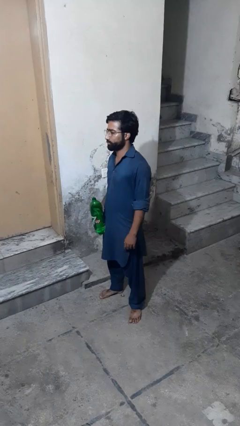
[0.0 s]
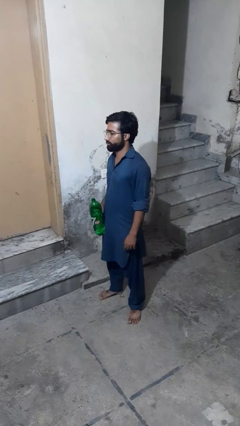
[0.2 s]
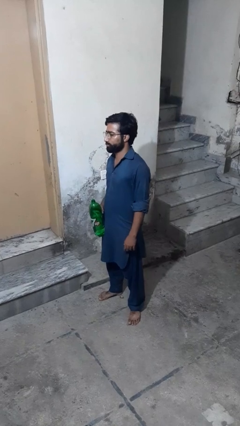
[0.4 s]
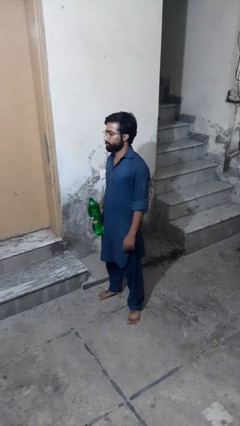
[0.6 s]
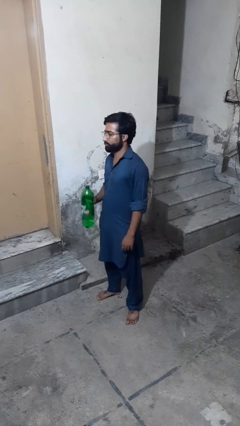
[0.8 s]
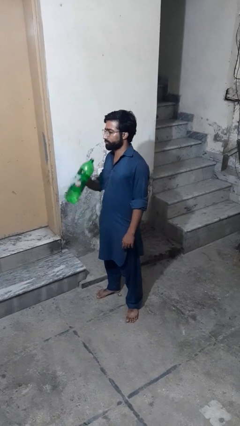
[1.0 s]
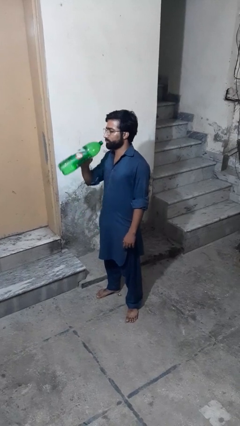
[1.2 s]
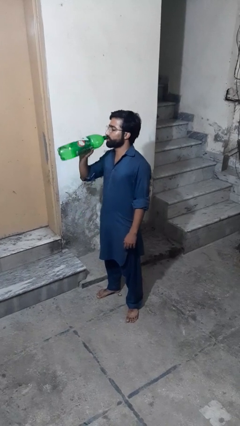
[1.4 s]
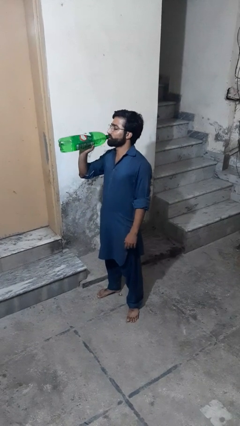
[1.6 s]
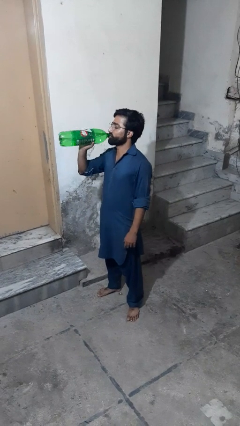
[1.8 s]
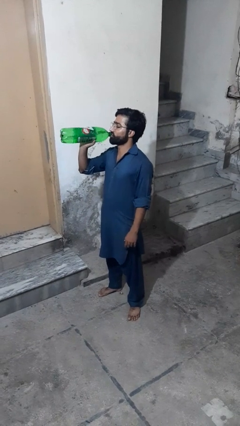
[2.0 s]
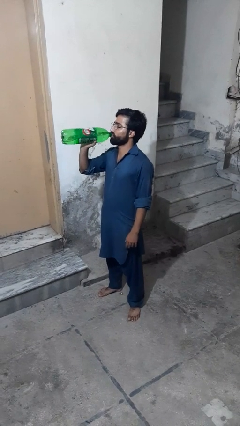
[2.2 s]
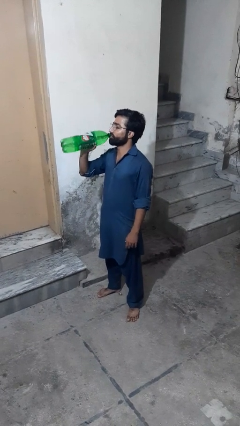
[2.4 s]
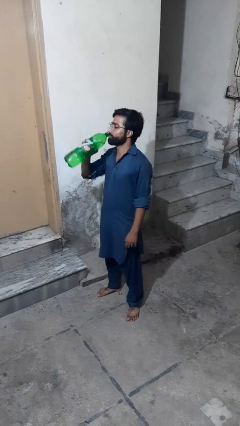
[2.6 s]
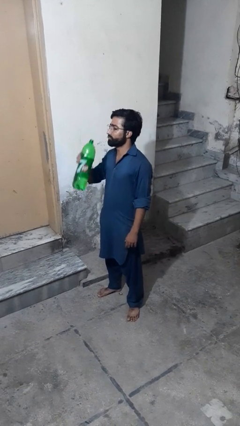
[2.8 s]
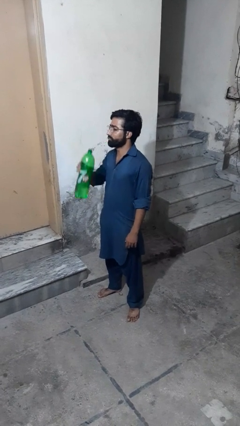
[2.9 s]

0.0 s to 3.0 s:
person drinks from bottle

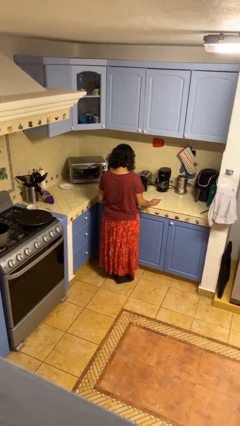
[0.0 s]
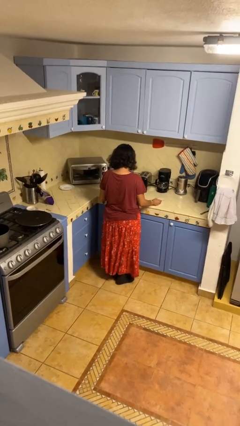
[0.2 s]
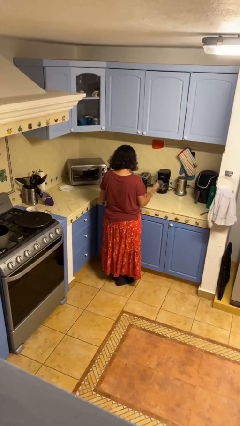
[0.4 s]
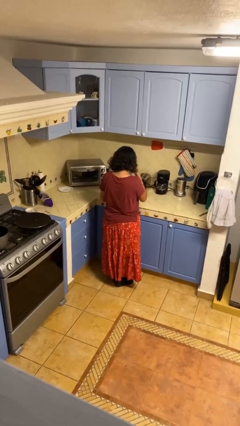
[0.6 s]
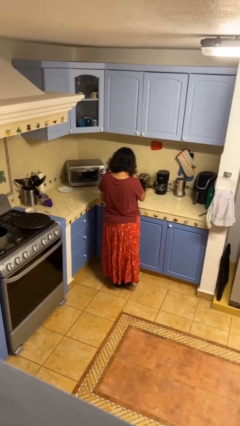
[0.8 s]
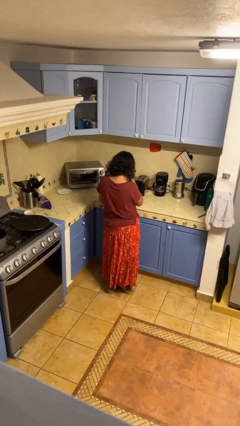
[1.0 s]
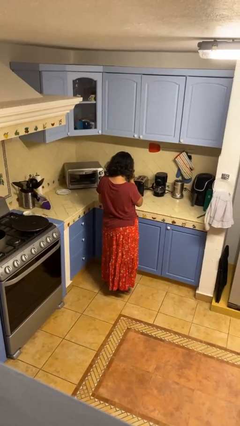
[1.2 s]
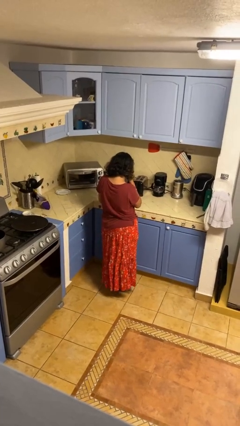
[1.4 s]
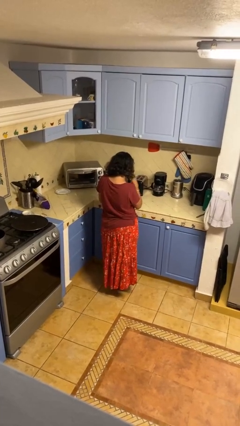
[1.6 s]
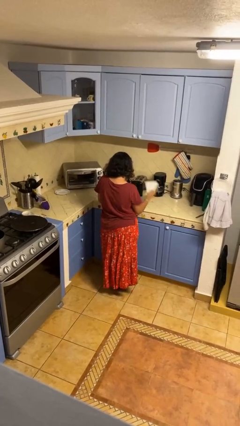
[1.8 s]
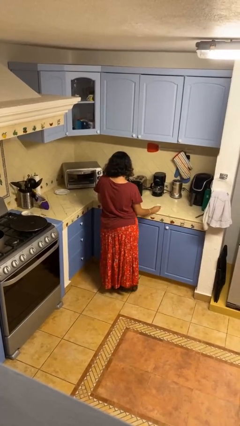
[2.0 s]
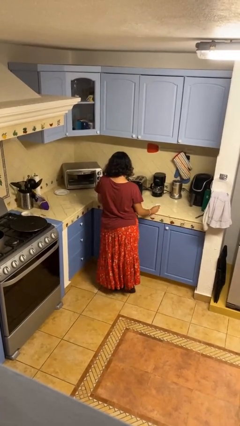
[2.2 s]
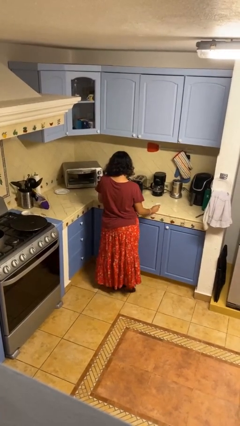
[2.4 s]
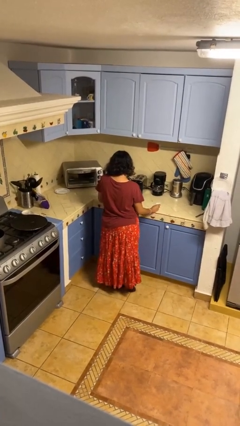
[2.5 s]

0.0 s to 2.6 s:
person wipes mouth with napkin

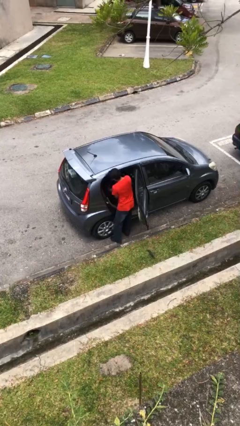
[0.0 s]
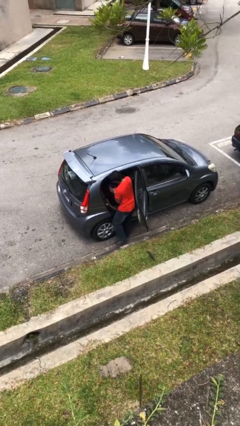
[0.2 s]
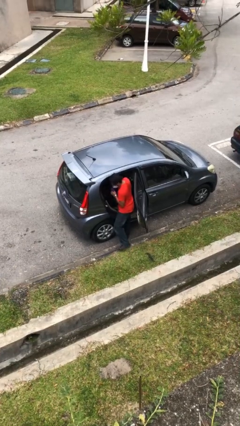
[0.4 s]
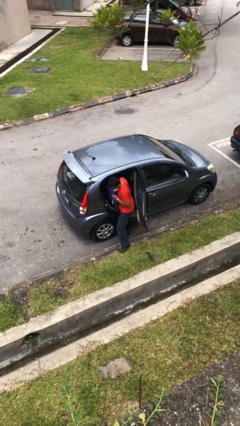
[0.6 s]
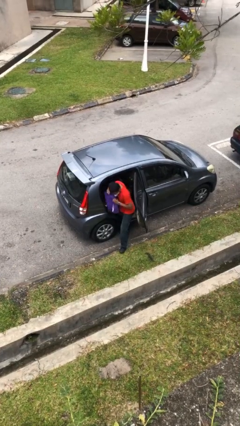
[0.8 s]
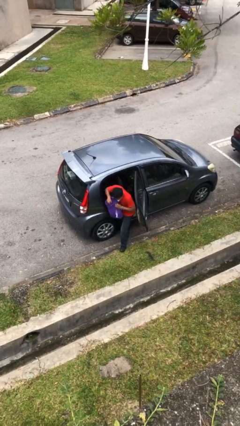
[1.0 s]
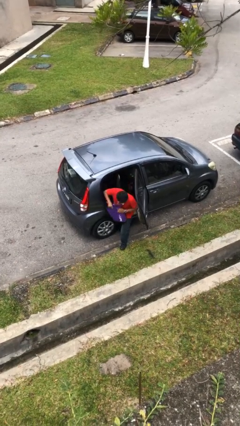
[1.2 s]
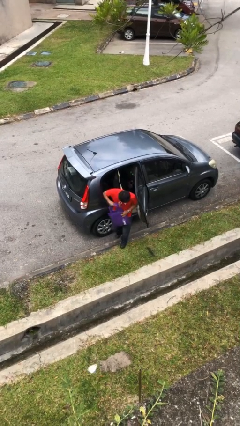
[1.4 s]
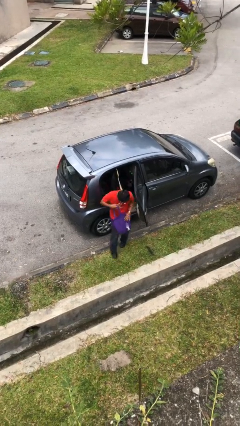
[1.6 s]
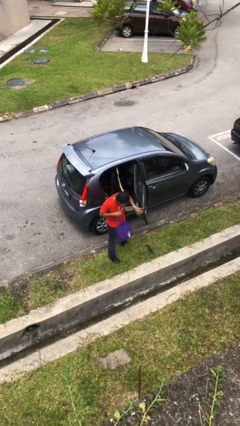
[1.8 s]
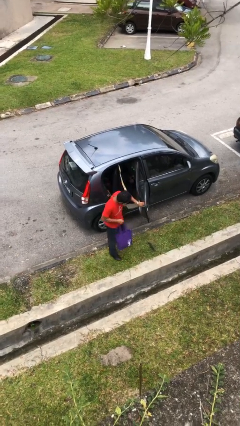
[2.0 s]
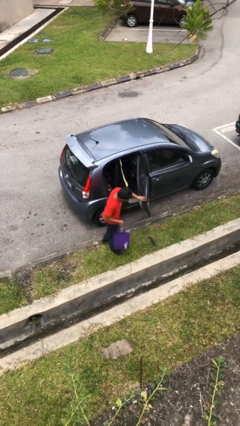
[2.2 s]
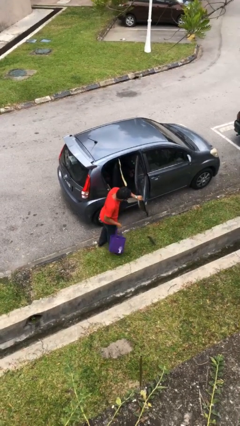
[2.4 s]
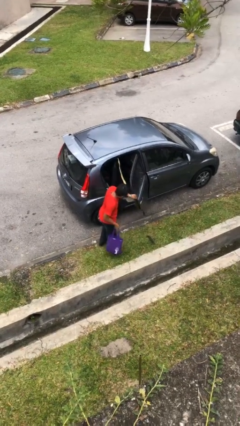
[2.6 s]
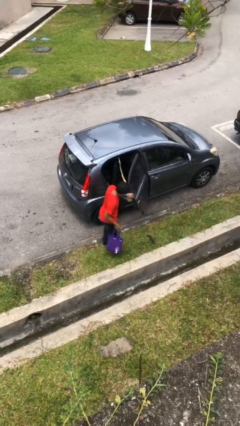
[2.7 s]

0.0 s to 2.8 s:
person unloads car

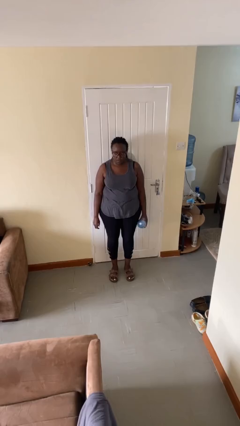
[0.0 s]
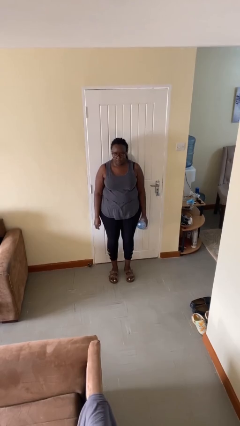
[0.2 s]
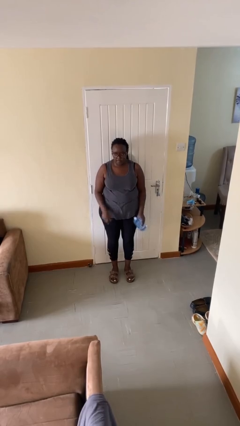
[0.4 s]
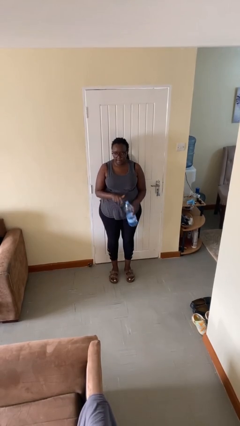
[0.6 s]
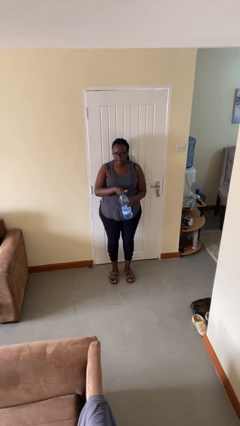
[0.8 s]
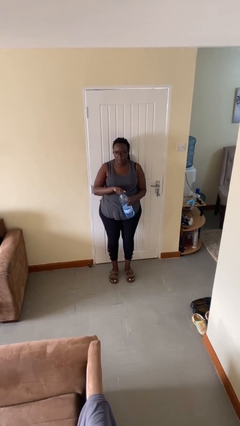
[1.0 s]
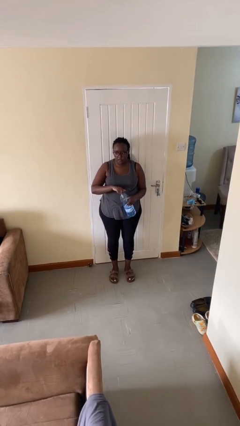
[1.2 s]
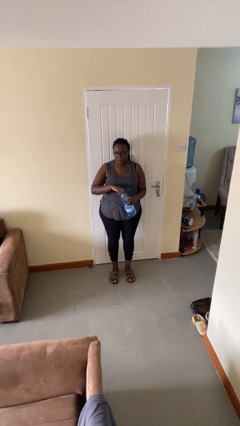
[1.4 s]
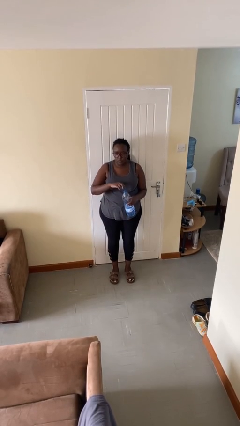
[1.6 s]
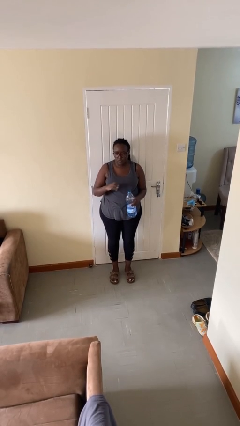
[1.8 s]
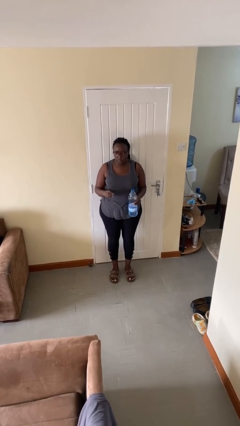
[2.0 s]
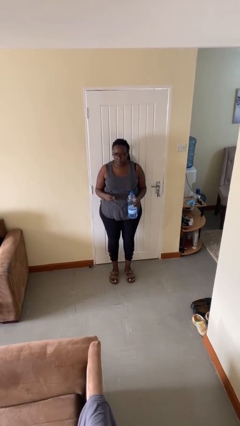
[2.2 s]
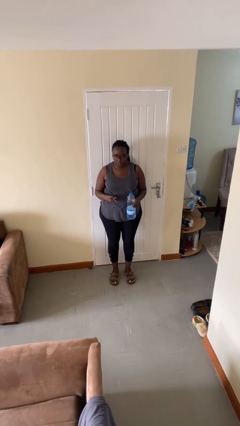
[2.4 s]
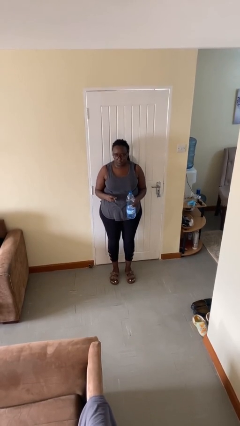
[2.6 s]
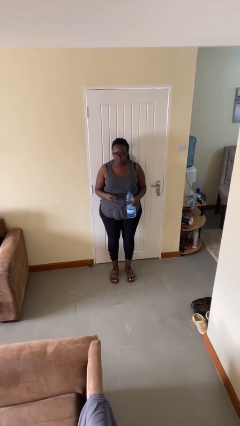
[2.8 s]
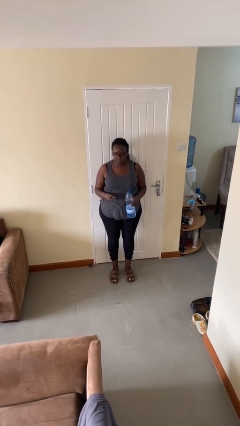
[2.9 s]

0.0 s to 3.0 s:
person unscrews lid from bottle

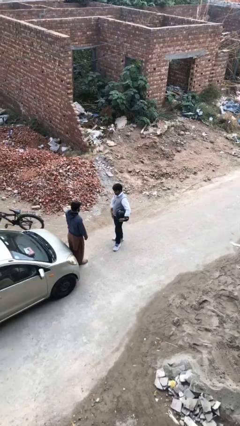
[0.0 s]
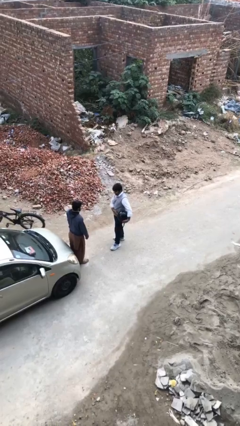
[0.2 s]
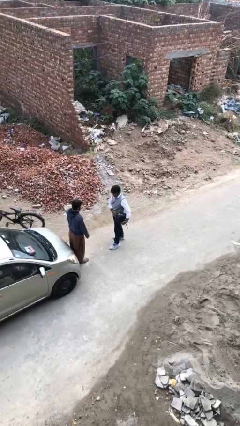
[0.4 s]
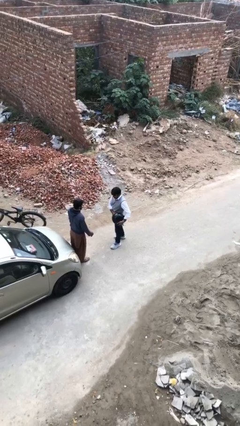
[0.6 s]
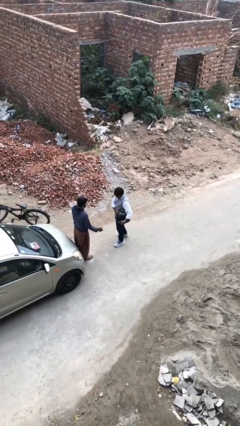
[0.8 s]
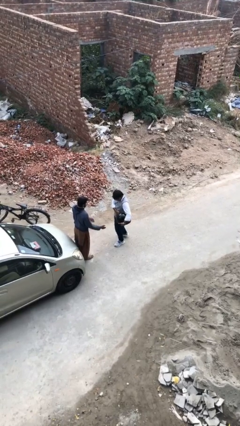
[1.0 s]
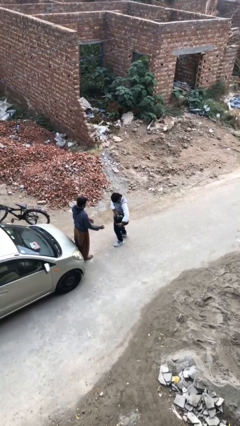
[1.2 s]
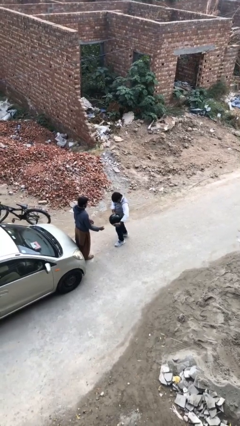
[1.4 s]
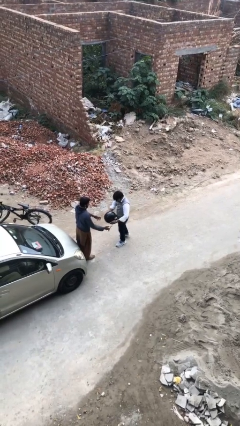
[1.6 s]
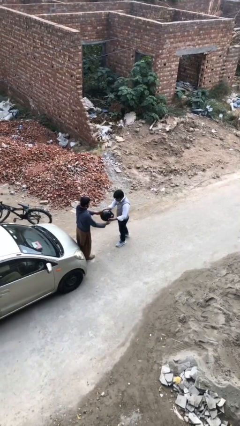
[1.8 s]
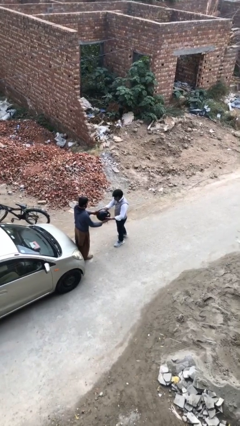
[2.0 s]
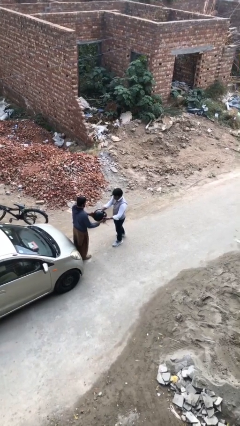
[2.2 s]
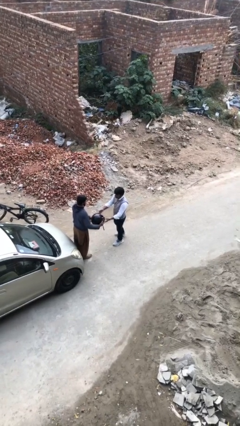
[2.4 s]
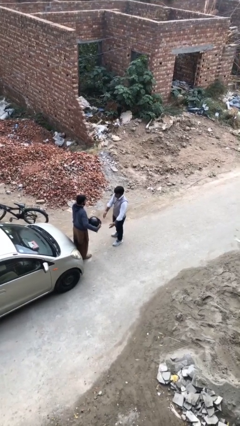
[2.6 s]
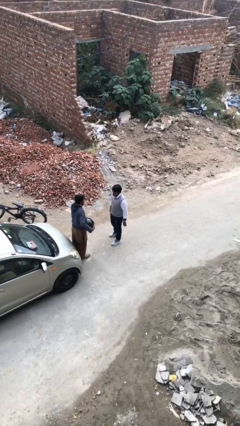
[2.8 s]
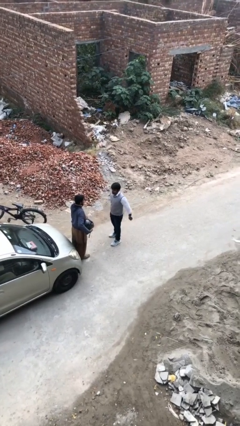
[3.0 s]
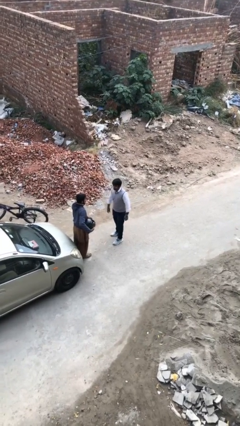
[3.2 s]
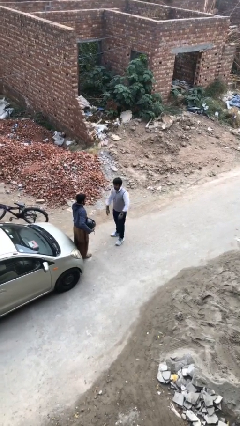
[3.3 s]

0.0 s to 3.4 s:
person transfers object to person

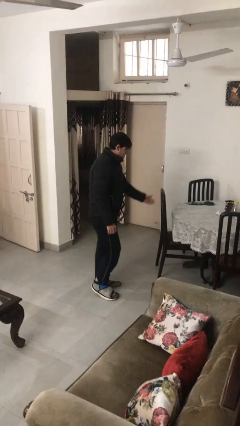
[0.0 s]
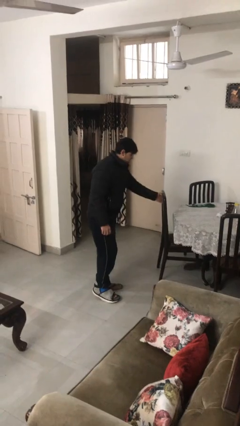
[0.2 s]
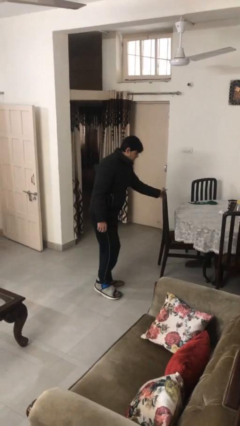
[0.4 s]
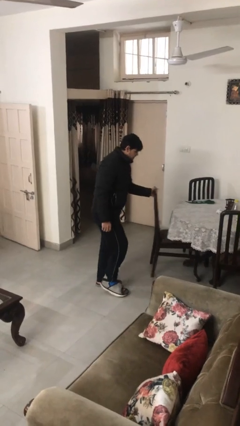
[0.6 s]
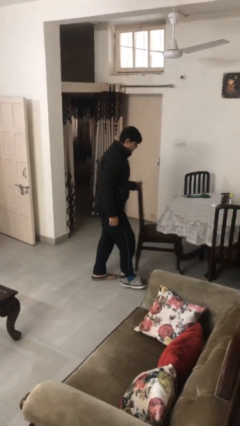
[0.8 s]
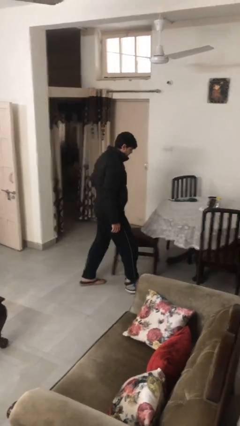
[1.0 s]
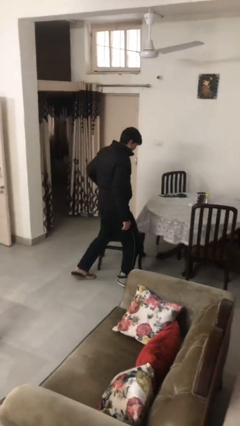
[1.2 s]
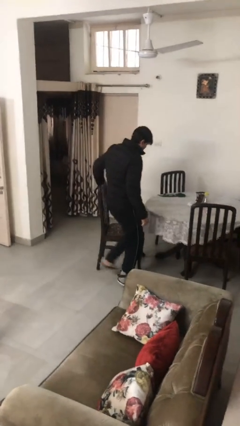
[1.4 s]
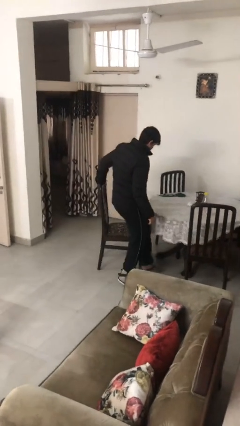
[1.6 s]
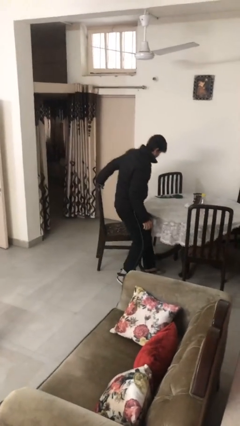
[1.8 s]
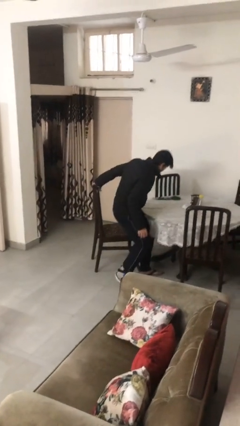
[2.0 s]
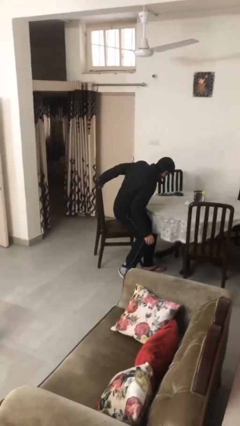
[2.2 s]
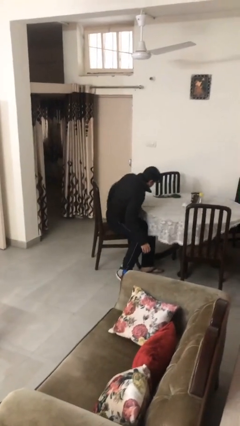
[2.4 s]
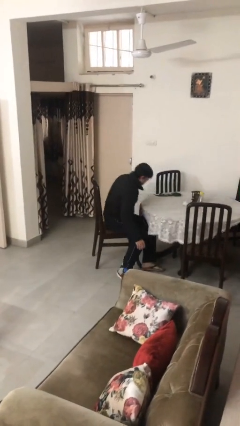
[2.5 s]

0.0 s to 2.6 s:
person sits down
